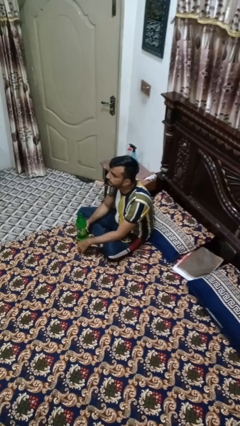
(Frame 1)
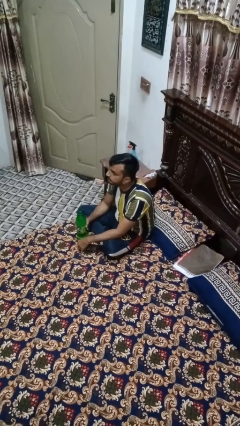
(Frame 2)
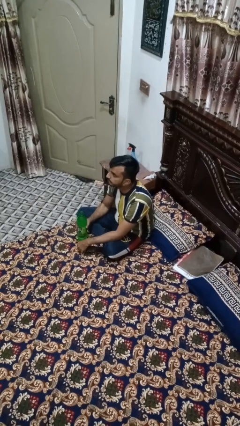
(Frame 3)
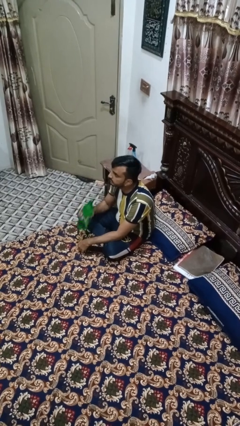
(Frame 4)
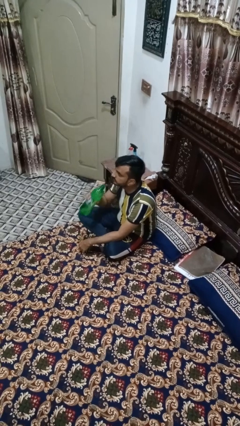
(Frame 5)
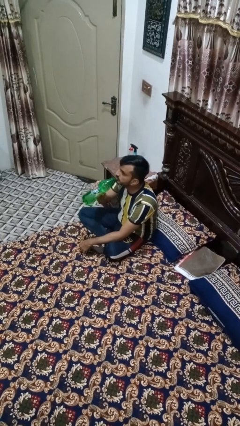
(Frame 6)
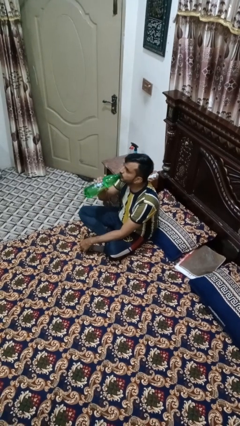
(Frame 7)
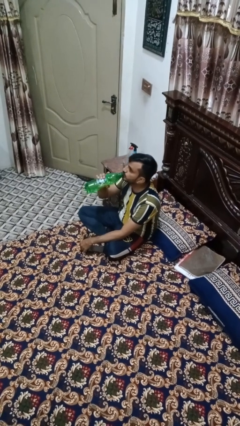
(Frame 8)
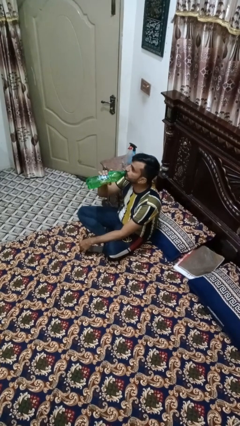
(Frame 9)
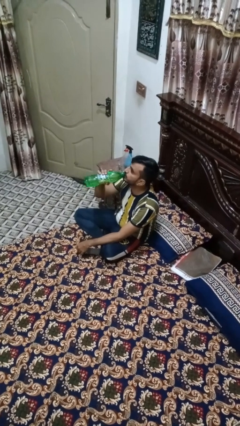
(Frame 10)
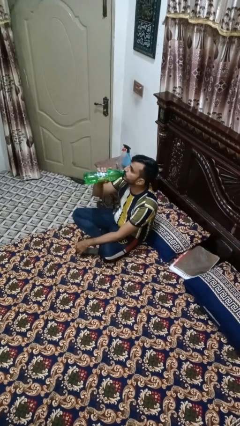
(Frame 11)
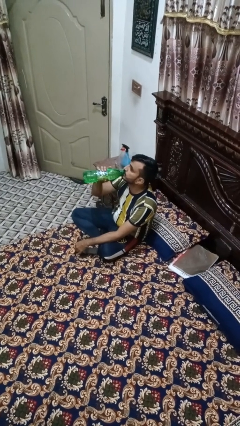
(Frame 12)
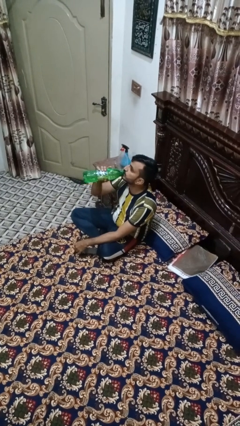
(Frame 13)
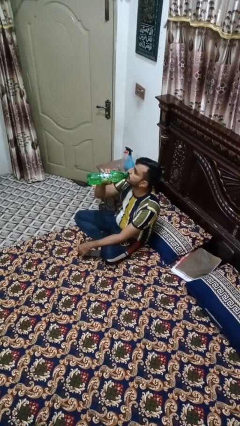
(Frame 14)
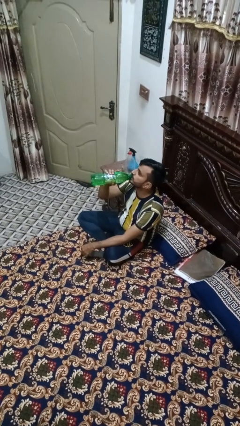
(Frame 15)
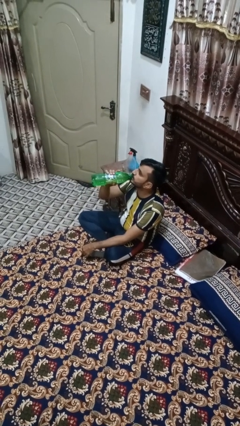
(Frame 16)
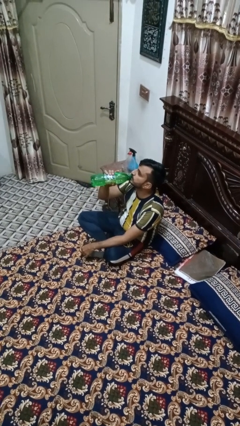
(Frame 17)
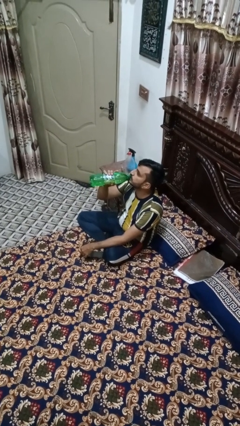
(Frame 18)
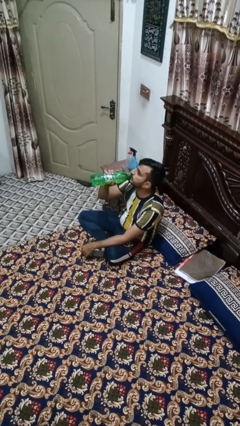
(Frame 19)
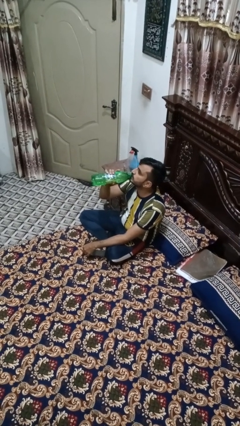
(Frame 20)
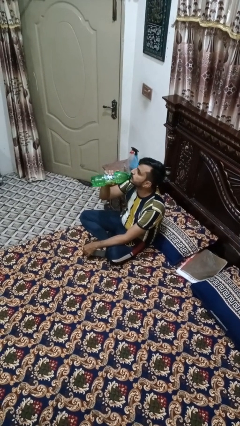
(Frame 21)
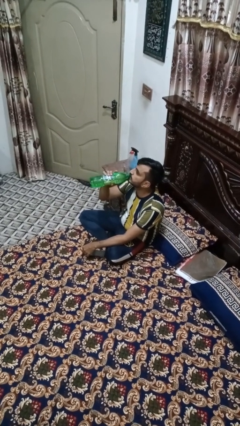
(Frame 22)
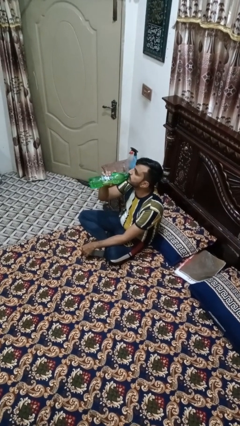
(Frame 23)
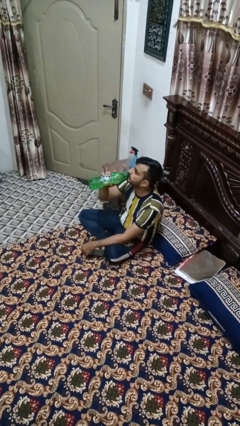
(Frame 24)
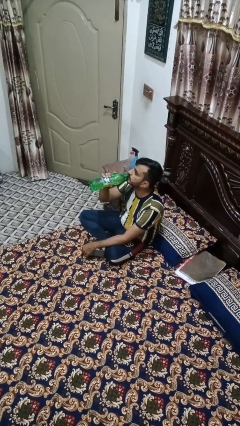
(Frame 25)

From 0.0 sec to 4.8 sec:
person drinks from bottle

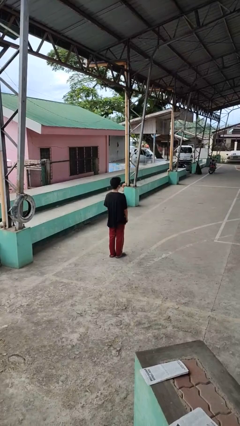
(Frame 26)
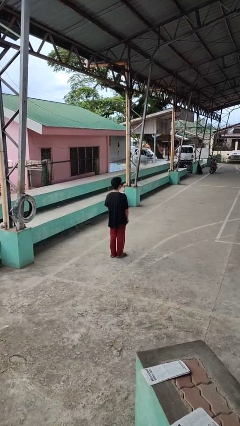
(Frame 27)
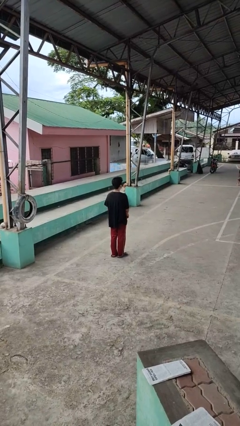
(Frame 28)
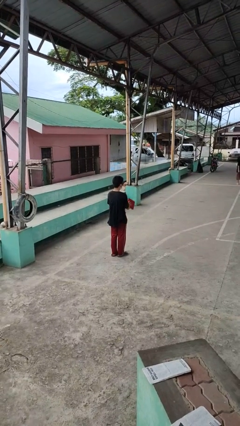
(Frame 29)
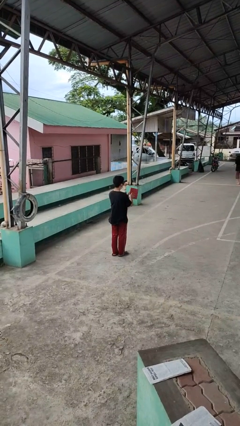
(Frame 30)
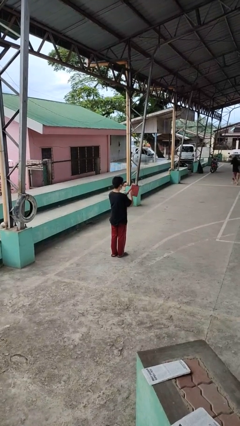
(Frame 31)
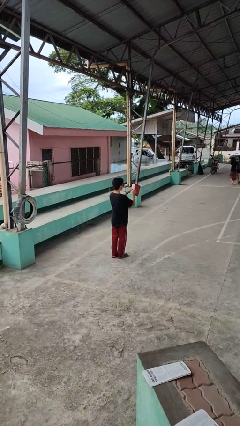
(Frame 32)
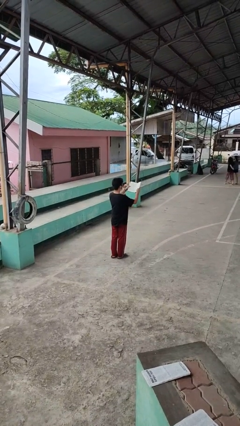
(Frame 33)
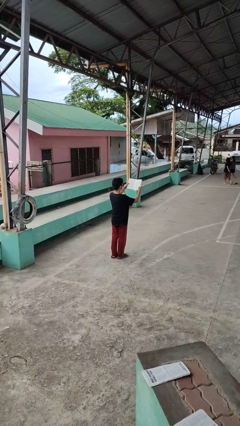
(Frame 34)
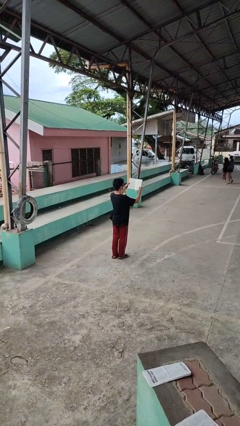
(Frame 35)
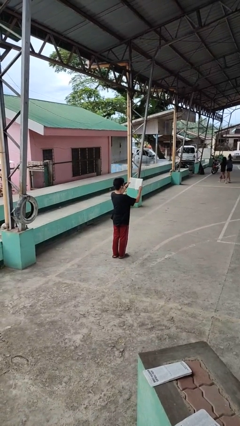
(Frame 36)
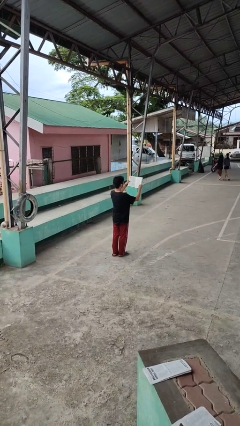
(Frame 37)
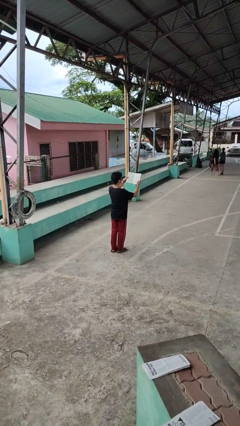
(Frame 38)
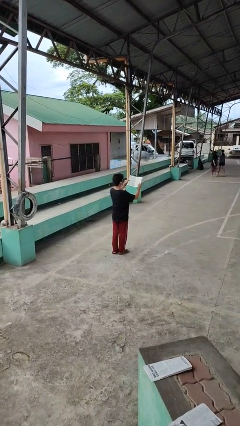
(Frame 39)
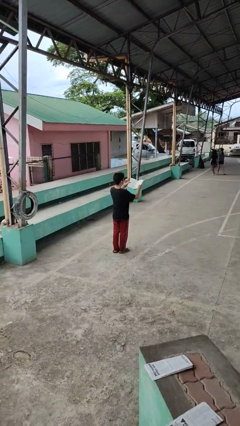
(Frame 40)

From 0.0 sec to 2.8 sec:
person reads book

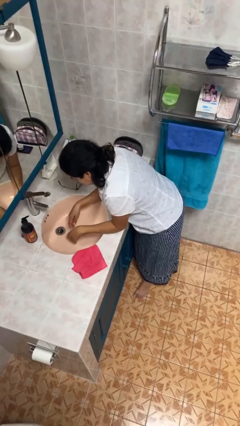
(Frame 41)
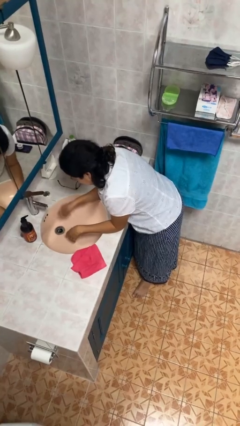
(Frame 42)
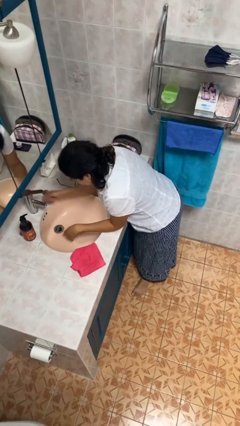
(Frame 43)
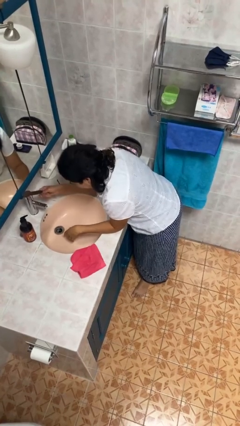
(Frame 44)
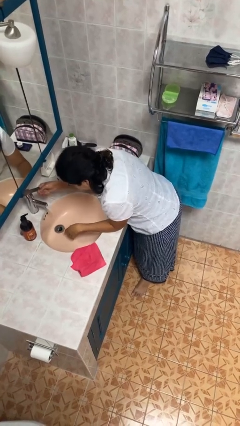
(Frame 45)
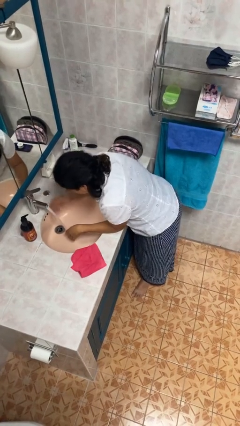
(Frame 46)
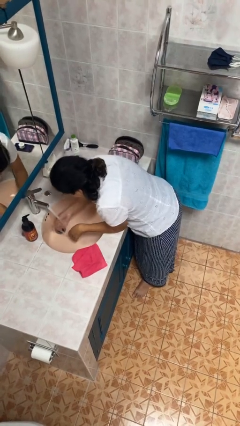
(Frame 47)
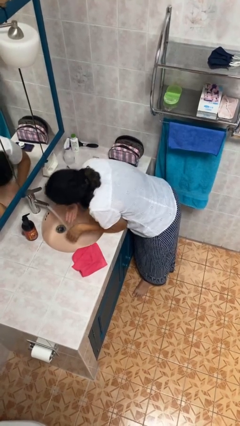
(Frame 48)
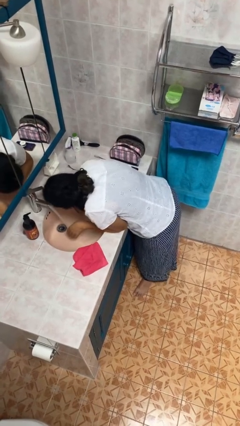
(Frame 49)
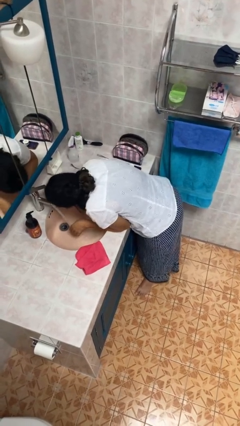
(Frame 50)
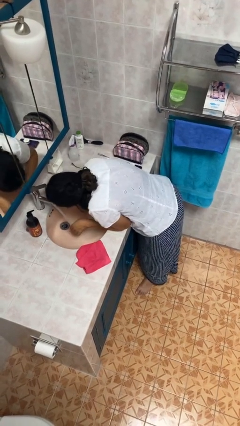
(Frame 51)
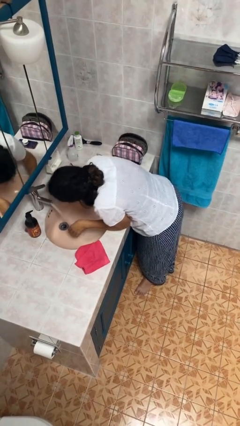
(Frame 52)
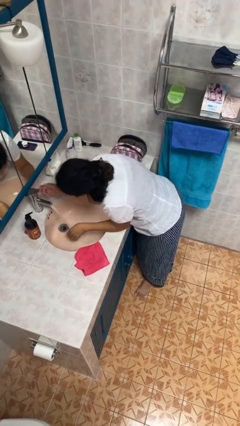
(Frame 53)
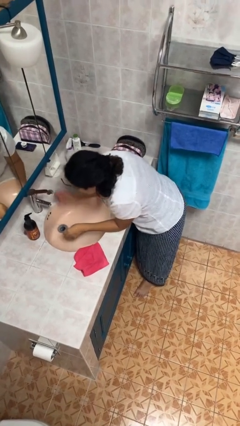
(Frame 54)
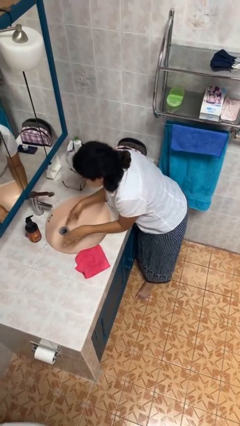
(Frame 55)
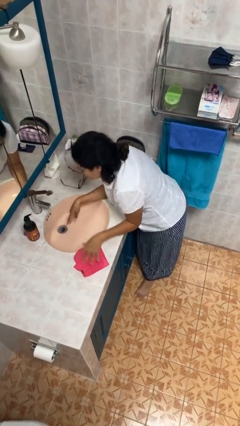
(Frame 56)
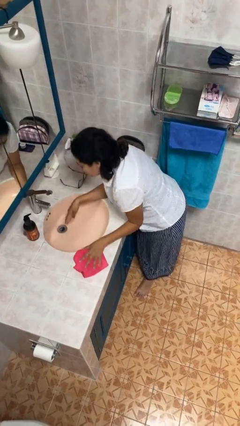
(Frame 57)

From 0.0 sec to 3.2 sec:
person washes face

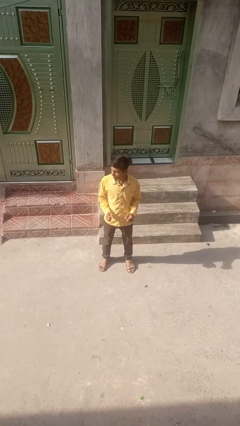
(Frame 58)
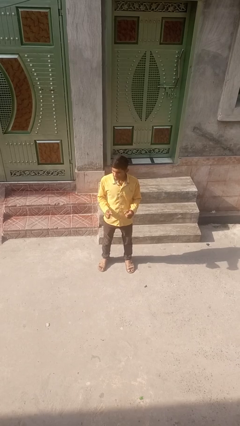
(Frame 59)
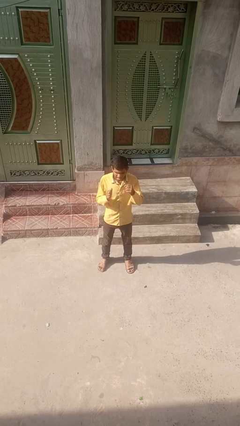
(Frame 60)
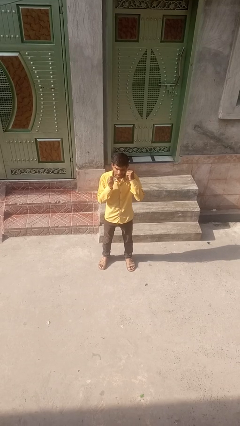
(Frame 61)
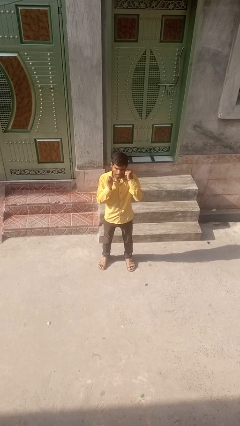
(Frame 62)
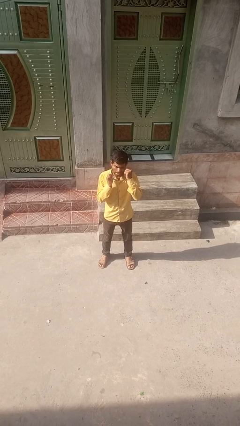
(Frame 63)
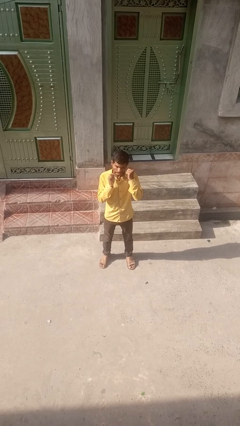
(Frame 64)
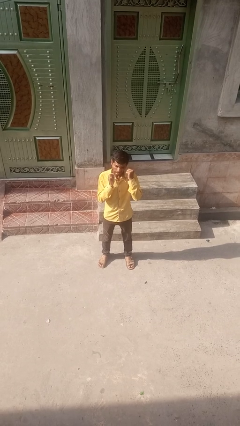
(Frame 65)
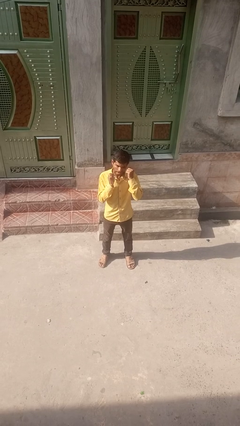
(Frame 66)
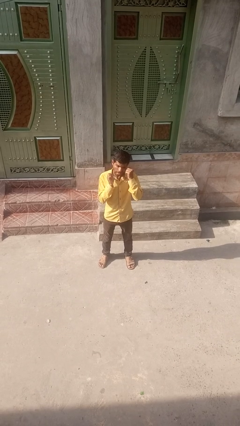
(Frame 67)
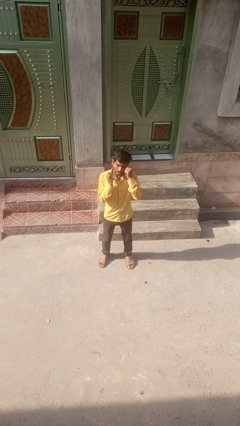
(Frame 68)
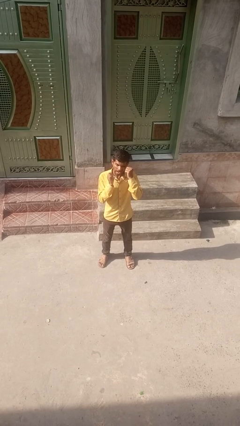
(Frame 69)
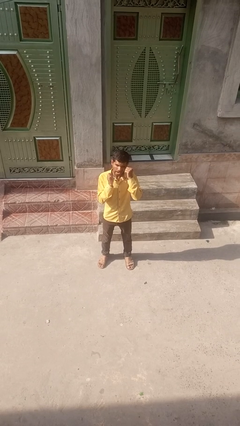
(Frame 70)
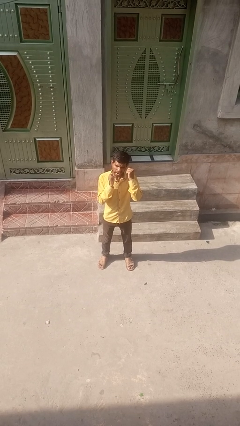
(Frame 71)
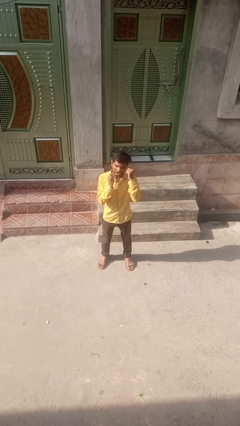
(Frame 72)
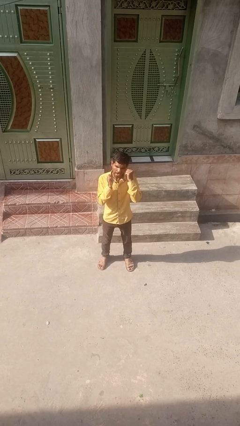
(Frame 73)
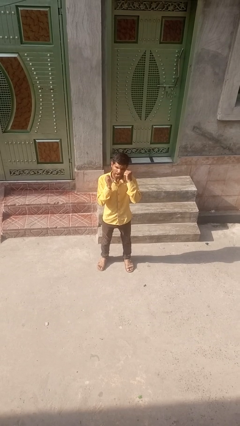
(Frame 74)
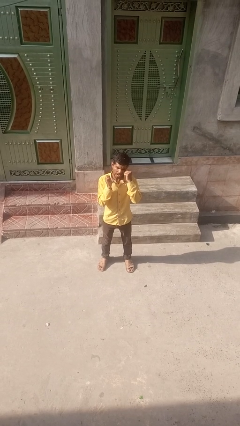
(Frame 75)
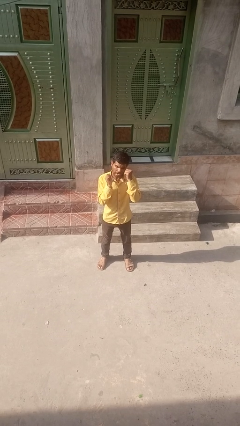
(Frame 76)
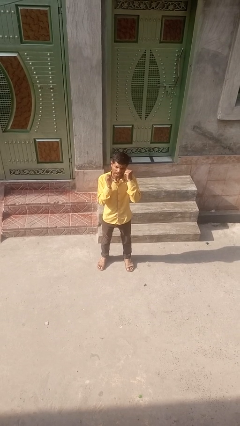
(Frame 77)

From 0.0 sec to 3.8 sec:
person flosses

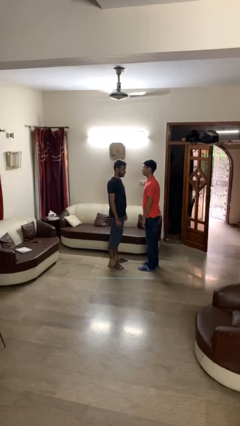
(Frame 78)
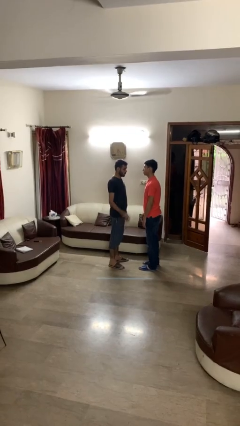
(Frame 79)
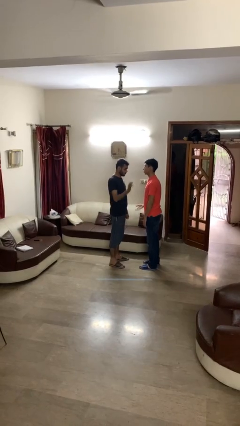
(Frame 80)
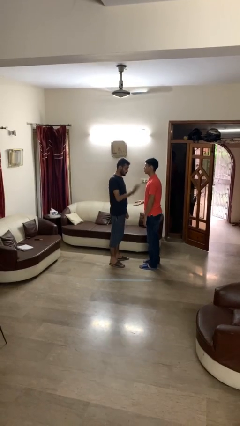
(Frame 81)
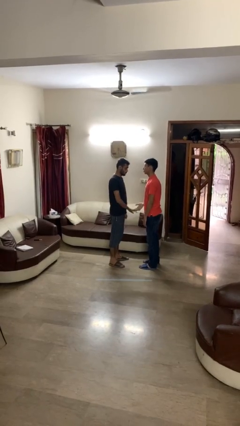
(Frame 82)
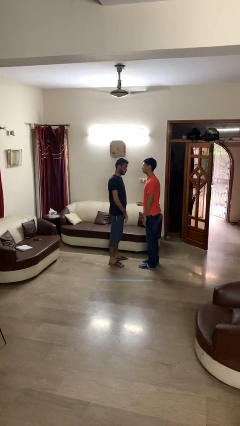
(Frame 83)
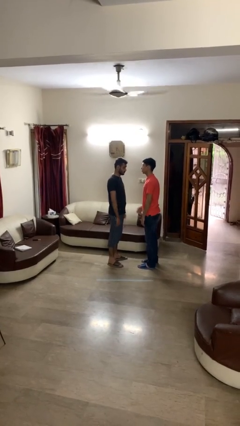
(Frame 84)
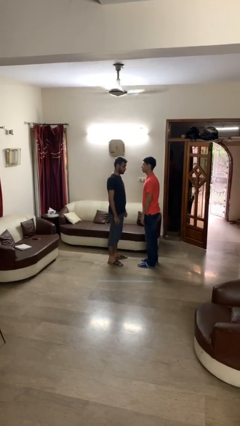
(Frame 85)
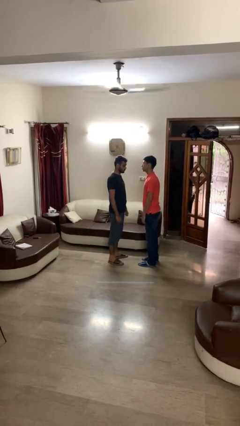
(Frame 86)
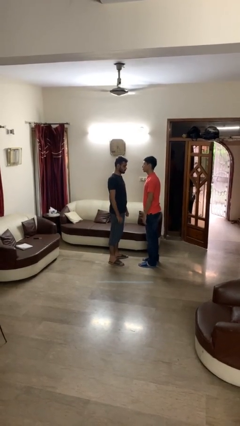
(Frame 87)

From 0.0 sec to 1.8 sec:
person highfives hand

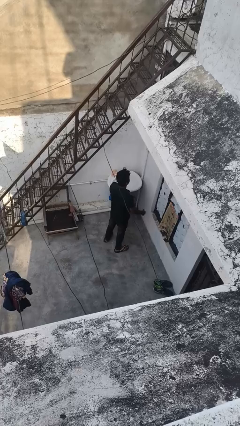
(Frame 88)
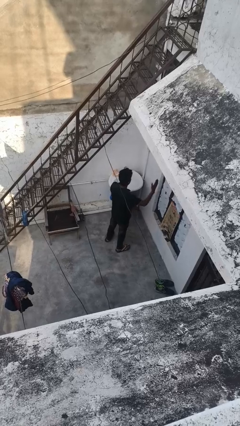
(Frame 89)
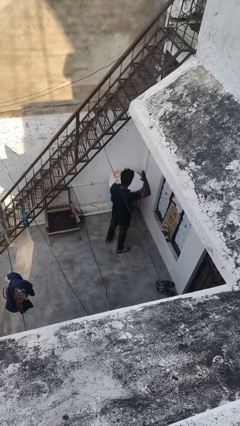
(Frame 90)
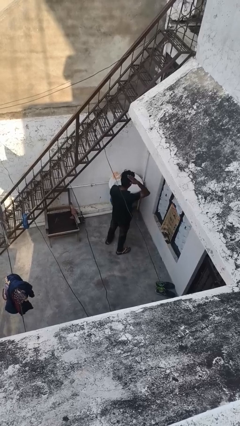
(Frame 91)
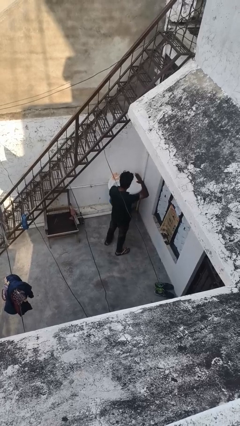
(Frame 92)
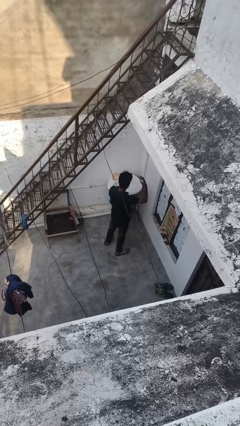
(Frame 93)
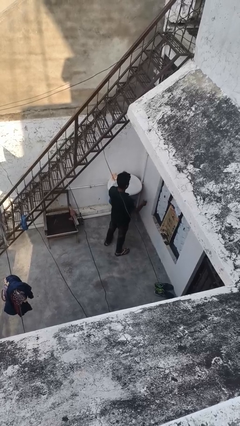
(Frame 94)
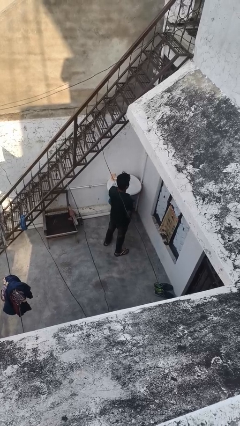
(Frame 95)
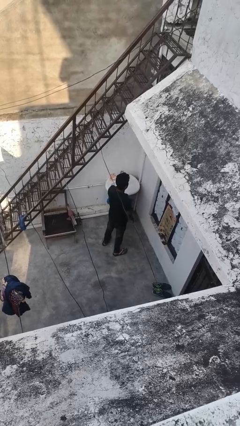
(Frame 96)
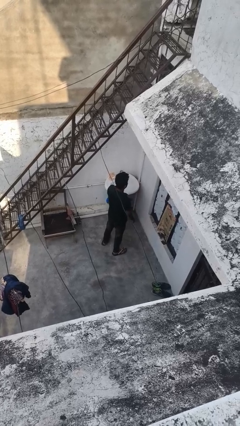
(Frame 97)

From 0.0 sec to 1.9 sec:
person pats head
